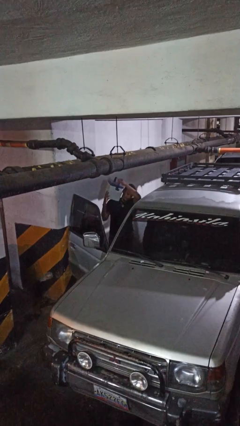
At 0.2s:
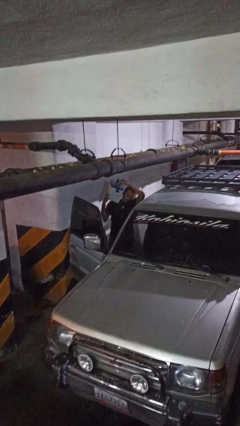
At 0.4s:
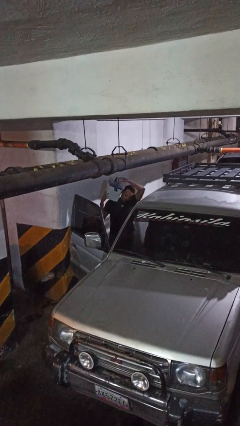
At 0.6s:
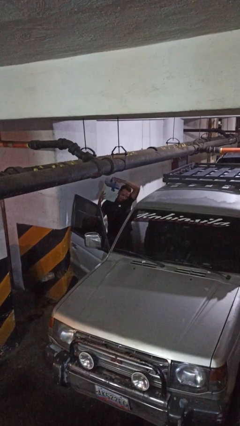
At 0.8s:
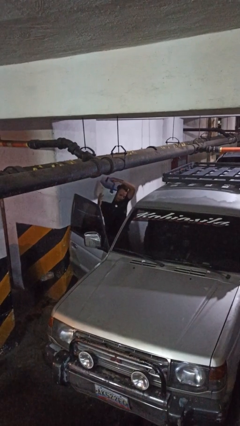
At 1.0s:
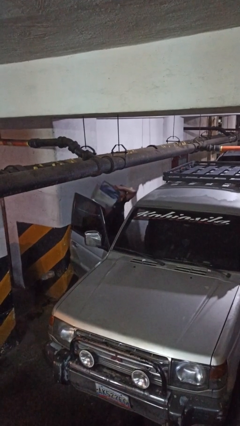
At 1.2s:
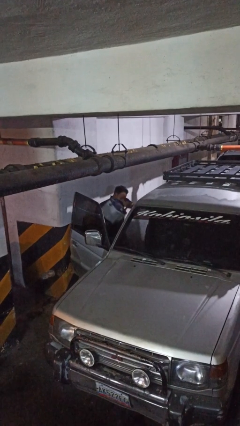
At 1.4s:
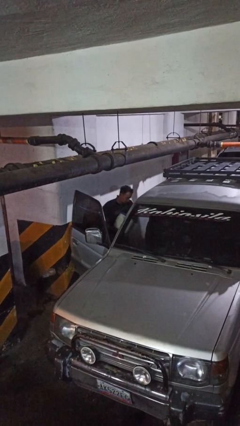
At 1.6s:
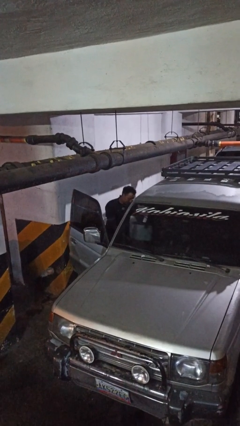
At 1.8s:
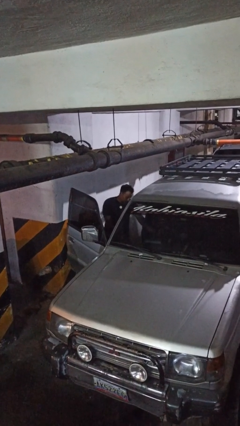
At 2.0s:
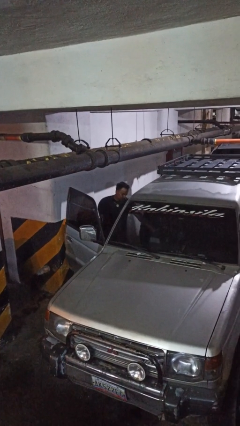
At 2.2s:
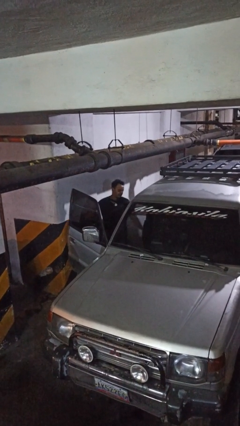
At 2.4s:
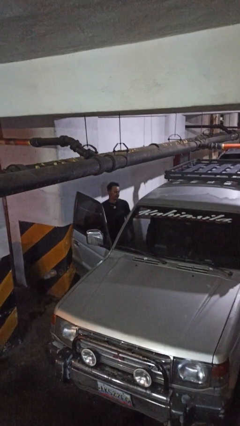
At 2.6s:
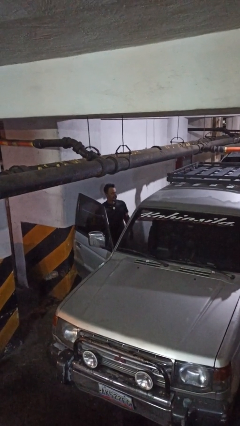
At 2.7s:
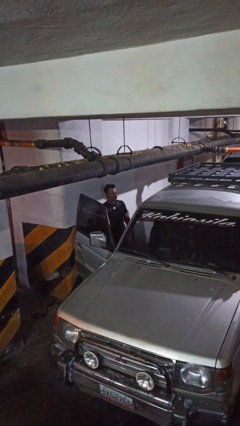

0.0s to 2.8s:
person loads car

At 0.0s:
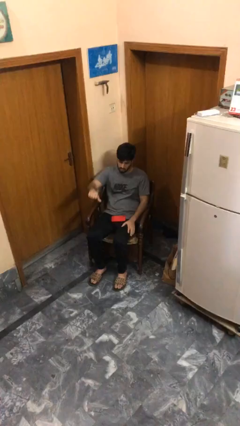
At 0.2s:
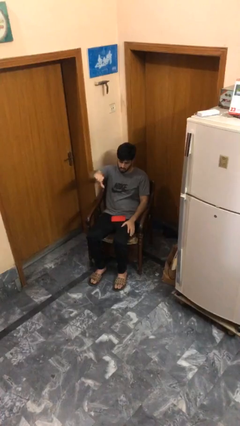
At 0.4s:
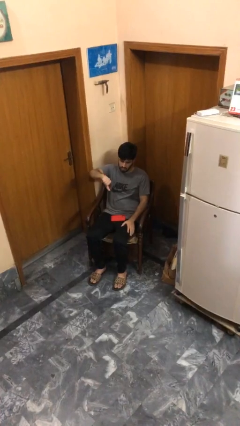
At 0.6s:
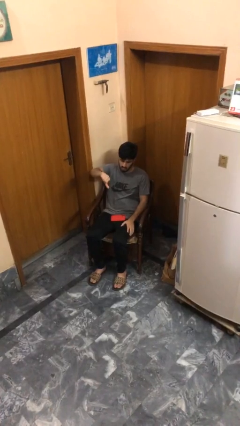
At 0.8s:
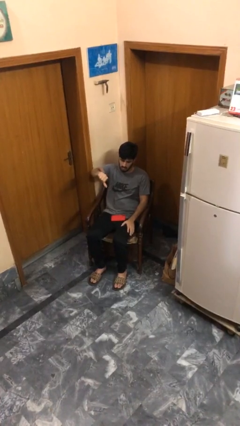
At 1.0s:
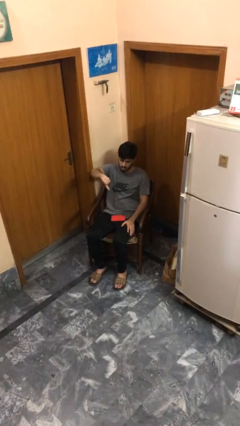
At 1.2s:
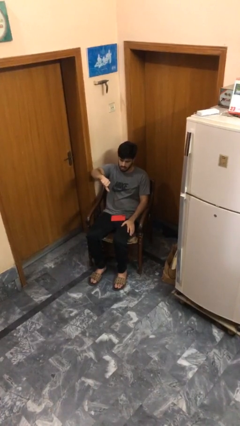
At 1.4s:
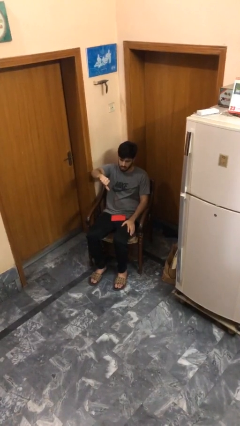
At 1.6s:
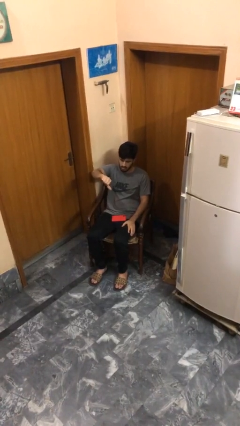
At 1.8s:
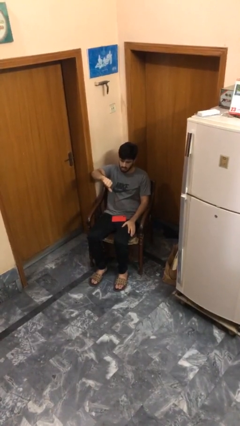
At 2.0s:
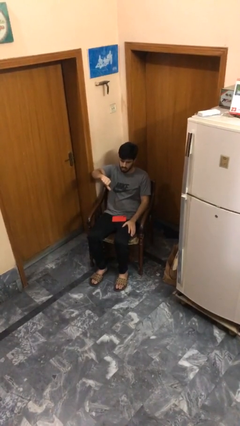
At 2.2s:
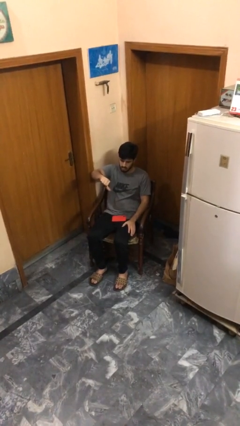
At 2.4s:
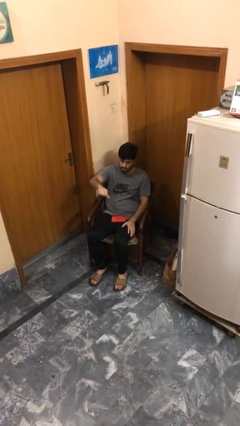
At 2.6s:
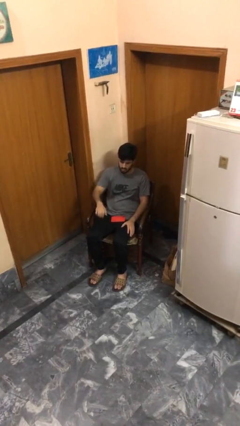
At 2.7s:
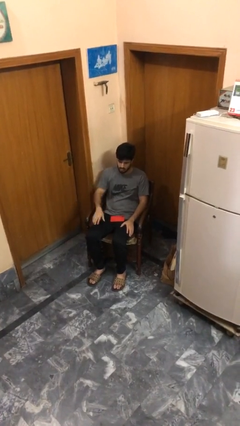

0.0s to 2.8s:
person gestures thumbs down

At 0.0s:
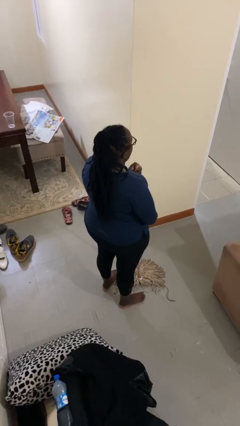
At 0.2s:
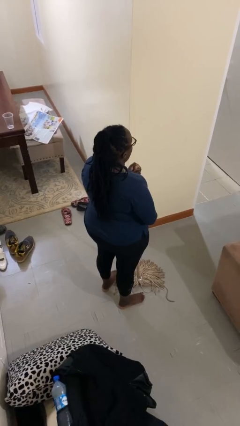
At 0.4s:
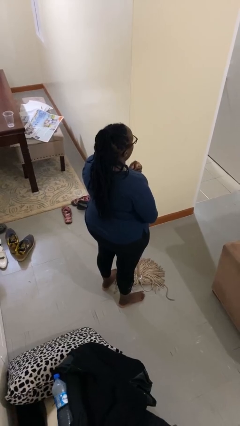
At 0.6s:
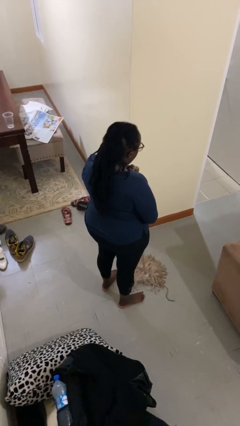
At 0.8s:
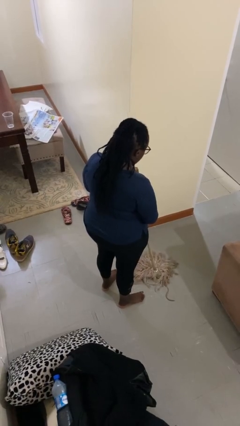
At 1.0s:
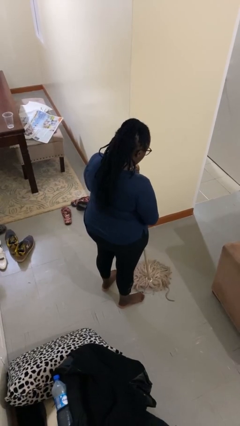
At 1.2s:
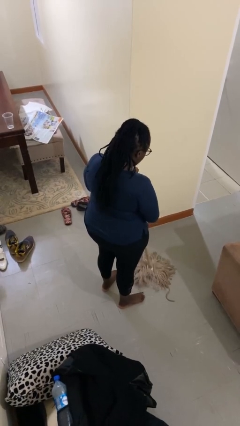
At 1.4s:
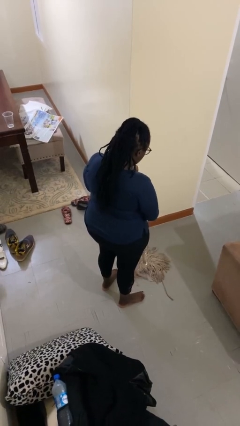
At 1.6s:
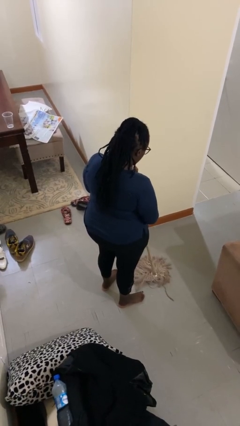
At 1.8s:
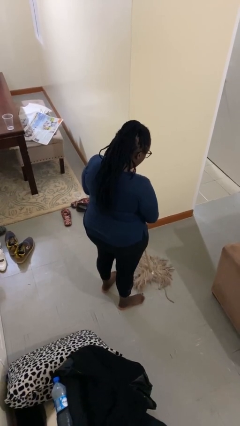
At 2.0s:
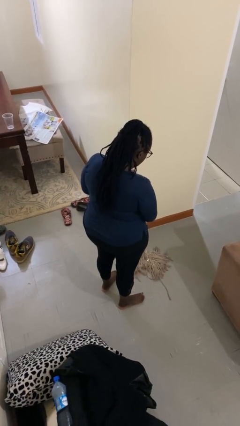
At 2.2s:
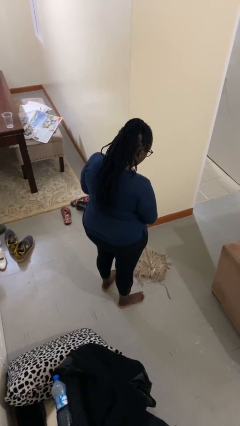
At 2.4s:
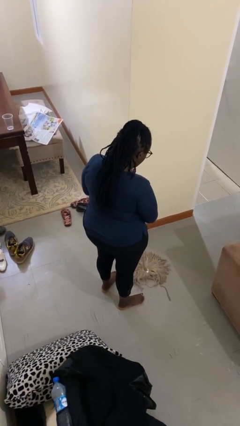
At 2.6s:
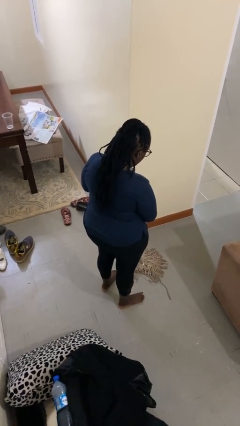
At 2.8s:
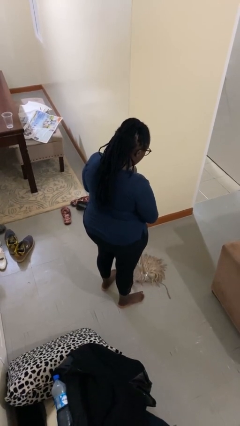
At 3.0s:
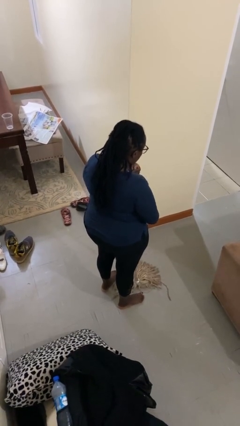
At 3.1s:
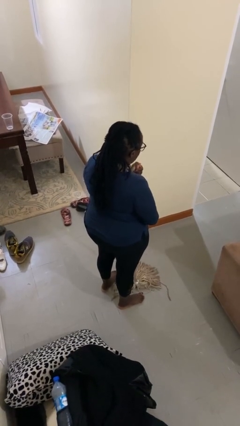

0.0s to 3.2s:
person mops

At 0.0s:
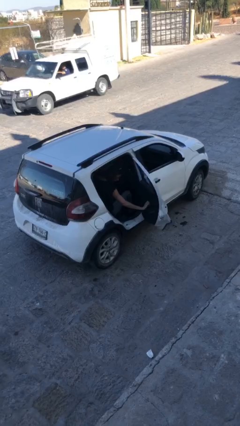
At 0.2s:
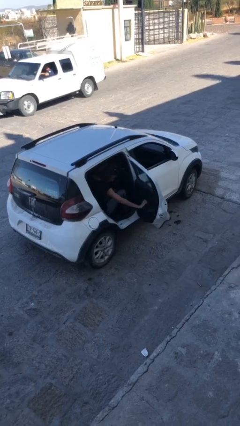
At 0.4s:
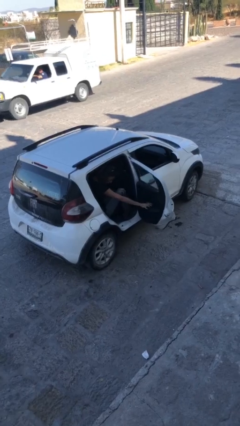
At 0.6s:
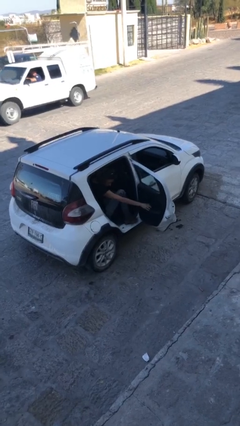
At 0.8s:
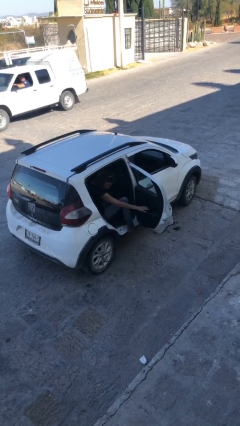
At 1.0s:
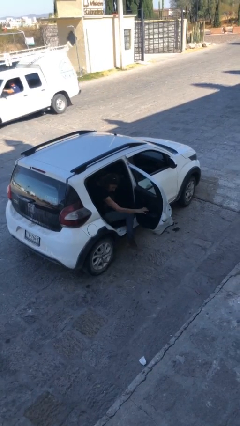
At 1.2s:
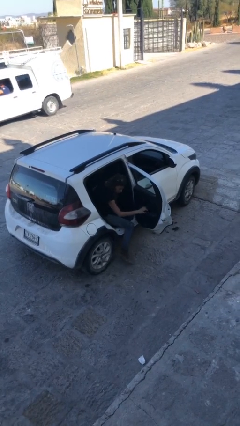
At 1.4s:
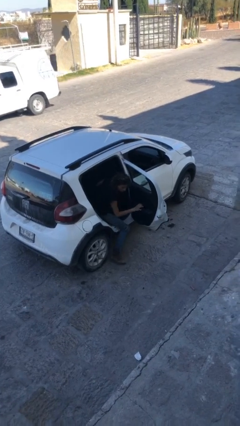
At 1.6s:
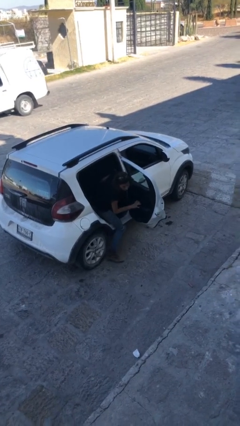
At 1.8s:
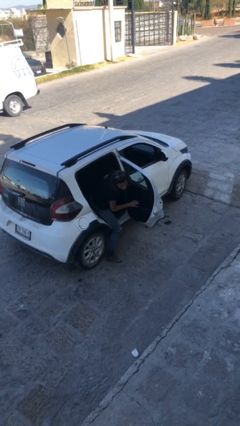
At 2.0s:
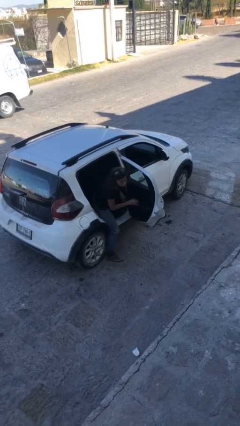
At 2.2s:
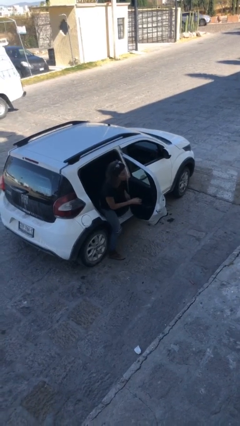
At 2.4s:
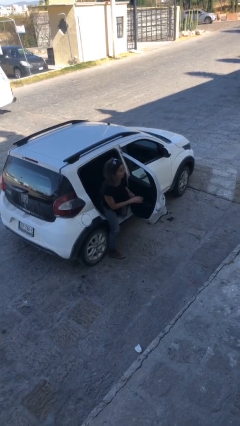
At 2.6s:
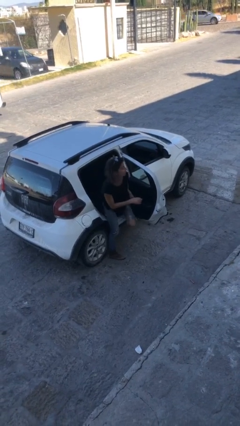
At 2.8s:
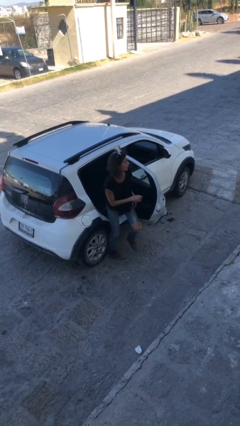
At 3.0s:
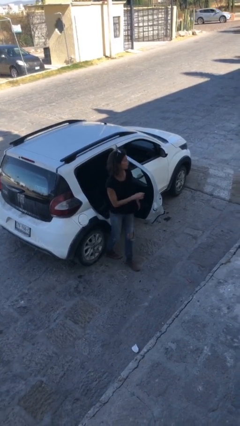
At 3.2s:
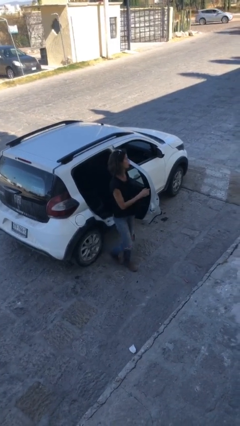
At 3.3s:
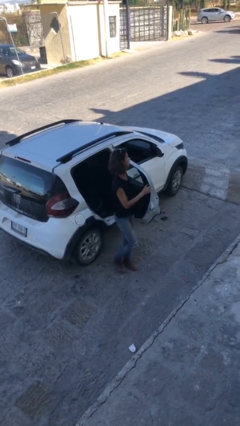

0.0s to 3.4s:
person exits car

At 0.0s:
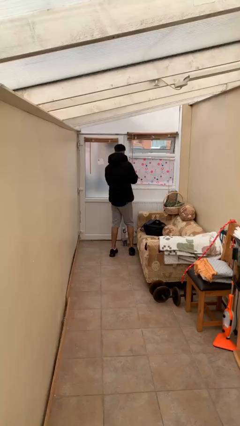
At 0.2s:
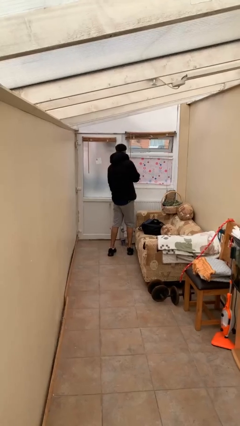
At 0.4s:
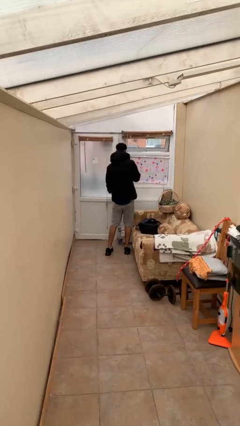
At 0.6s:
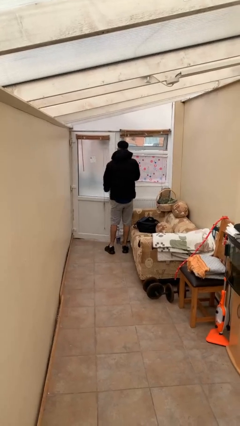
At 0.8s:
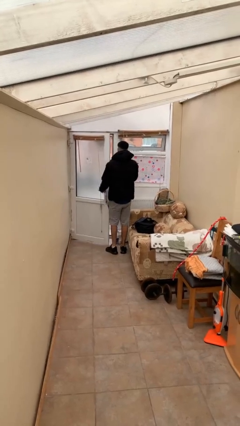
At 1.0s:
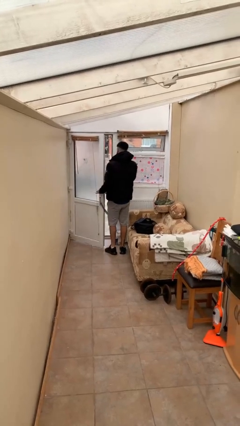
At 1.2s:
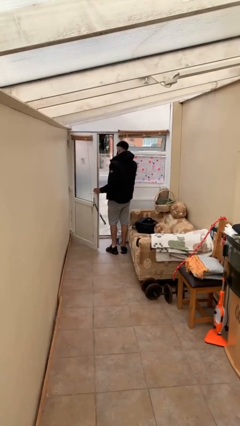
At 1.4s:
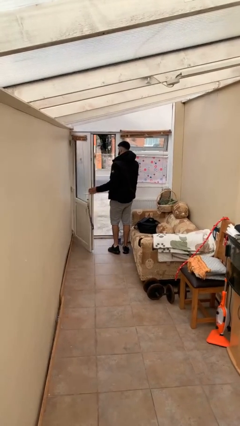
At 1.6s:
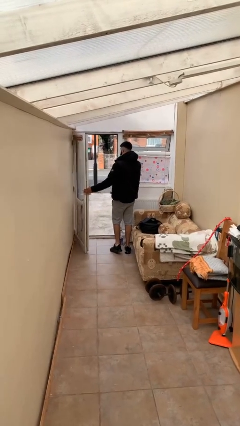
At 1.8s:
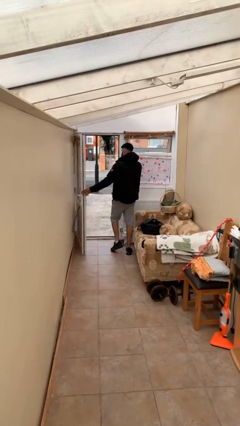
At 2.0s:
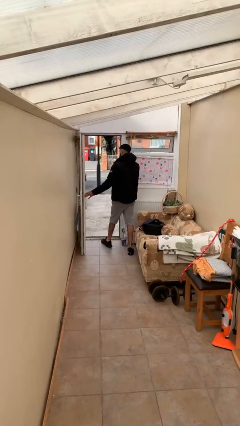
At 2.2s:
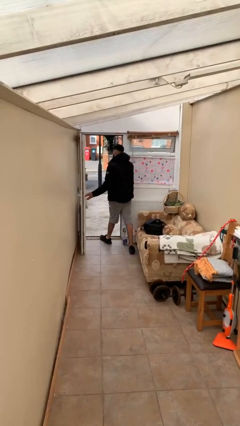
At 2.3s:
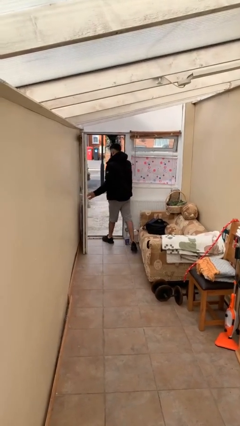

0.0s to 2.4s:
person opens facility door

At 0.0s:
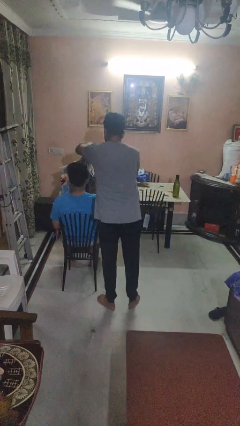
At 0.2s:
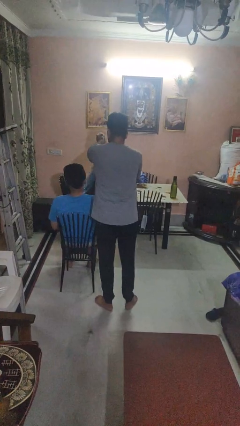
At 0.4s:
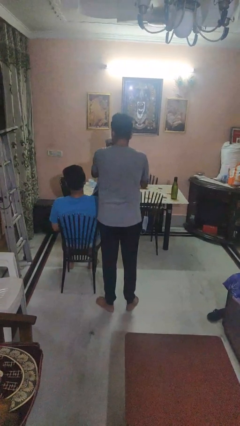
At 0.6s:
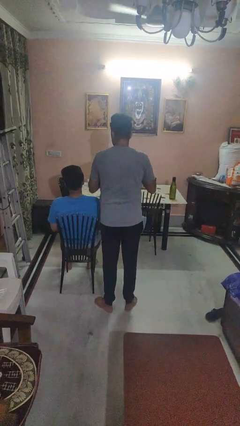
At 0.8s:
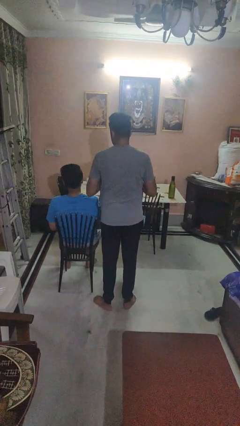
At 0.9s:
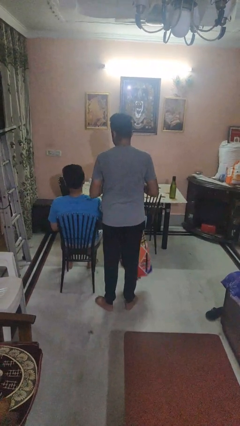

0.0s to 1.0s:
person uncovers friend with blanket

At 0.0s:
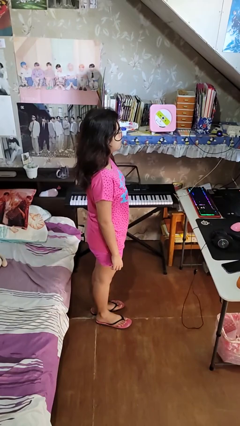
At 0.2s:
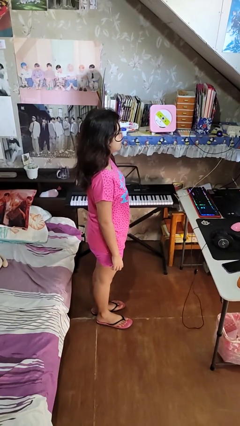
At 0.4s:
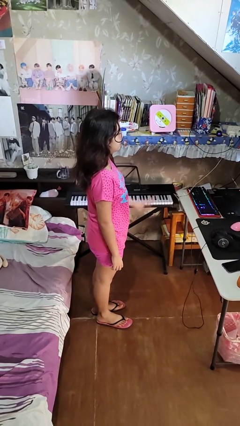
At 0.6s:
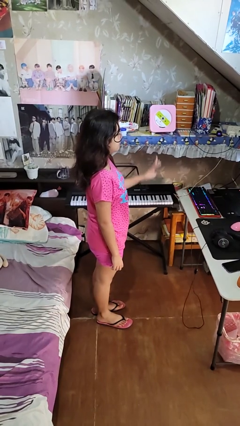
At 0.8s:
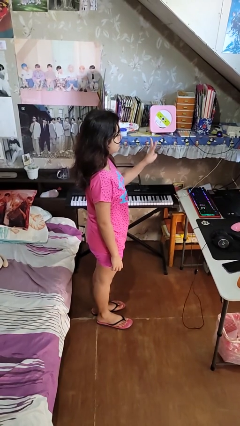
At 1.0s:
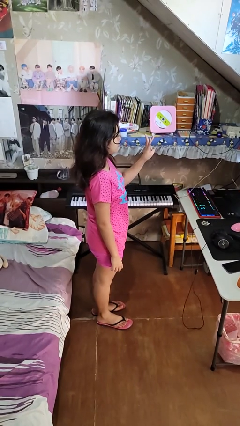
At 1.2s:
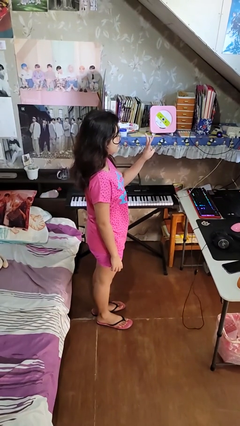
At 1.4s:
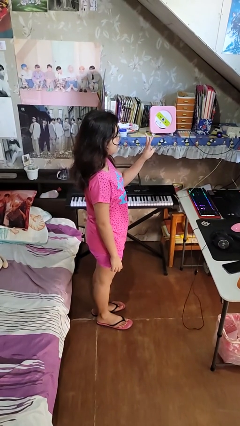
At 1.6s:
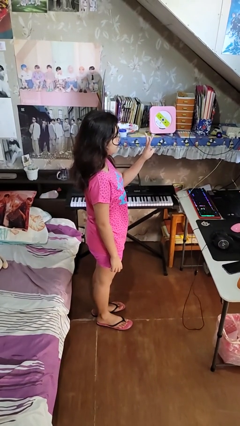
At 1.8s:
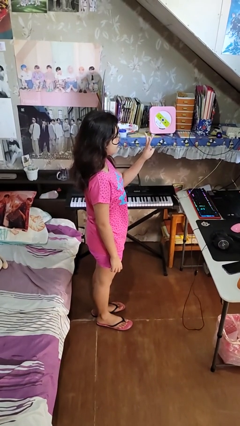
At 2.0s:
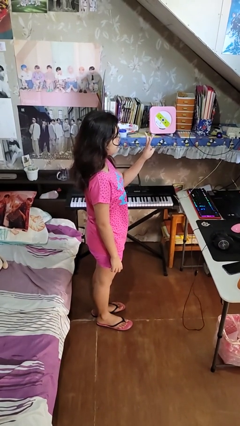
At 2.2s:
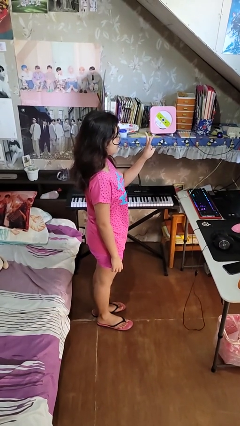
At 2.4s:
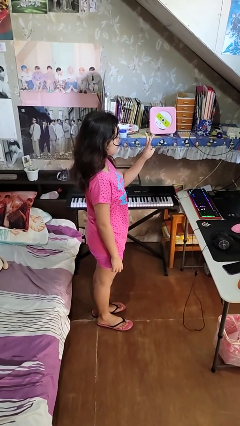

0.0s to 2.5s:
person gestures number three
